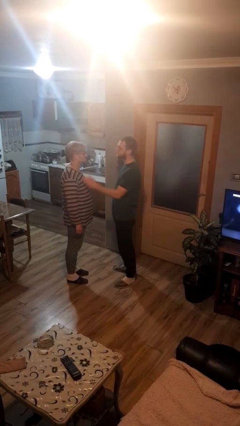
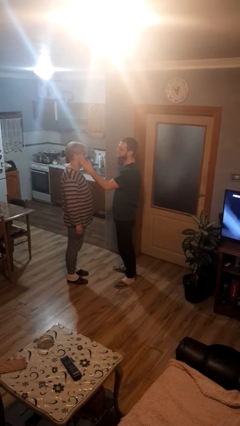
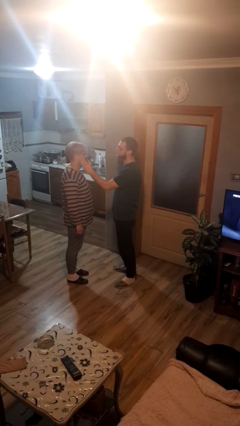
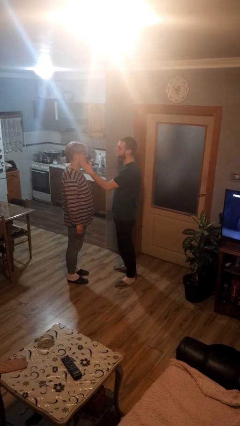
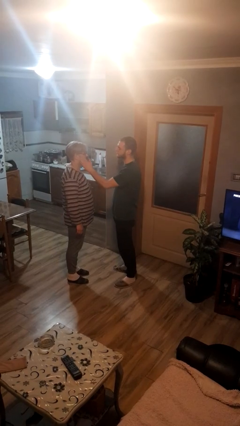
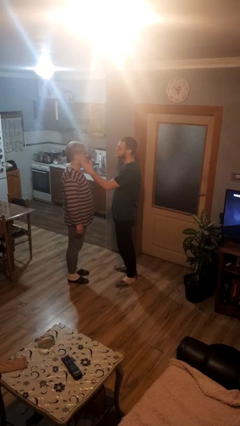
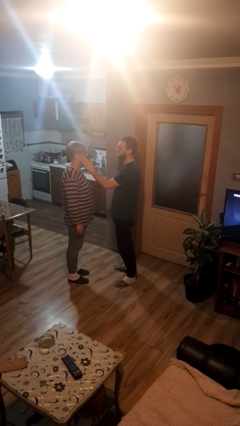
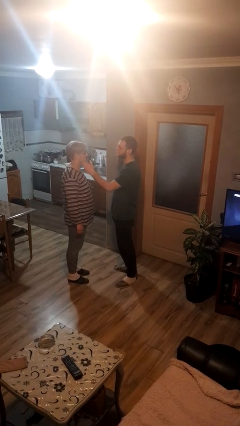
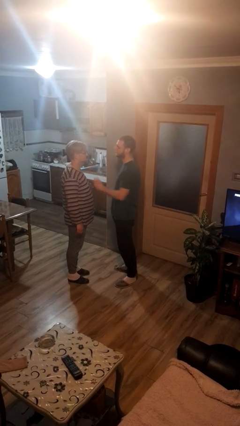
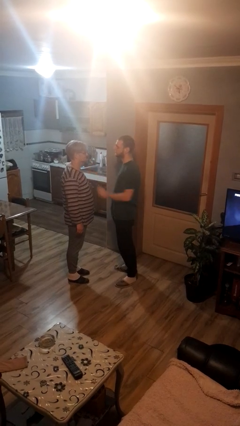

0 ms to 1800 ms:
person touches face of person

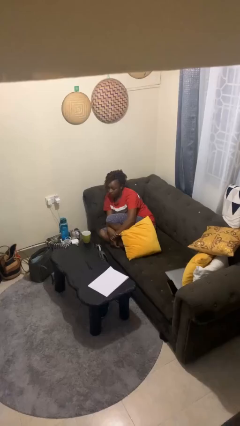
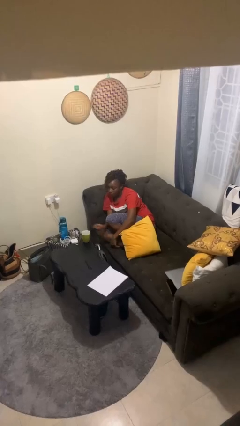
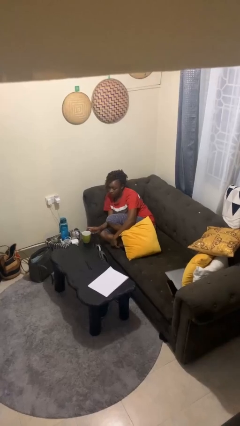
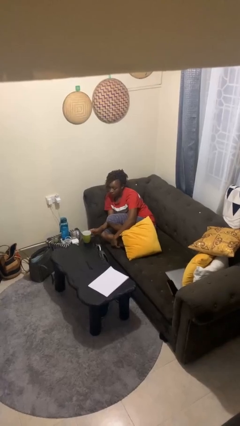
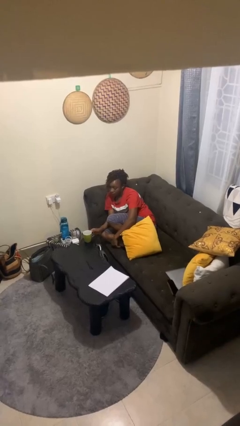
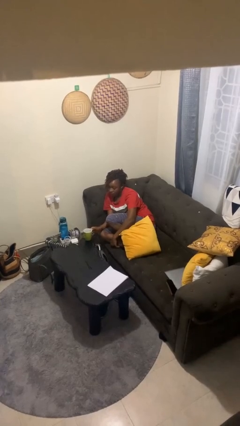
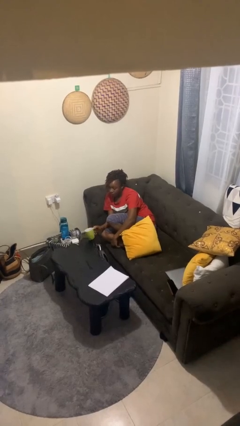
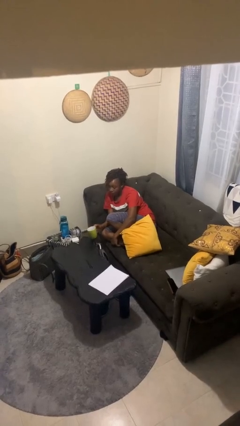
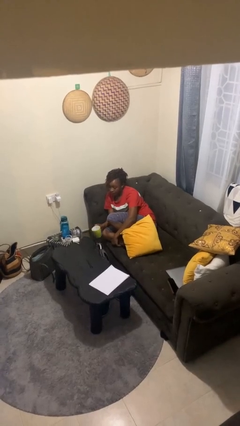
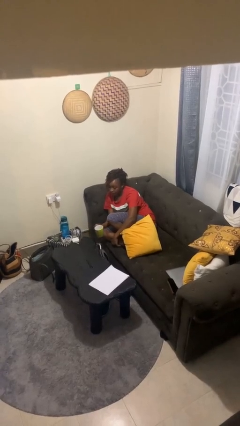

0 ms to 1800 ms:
person picks up object from table

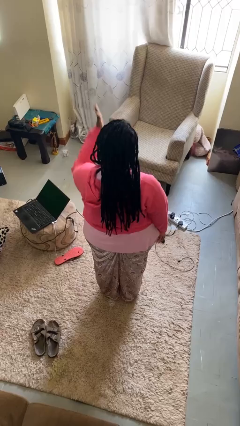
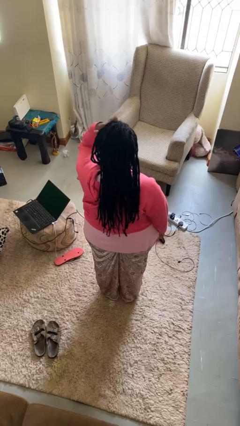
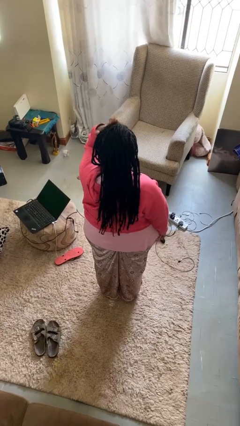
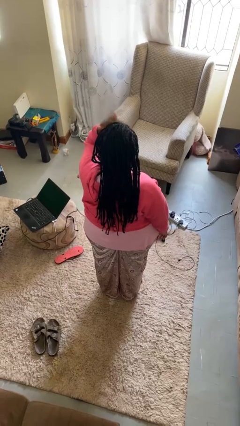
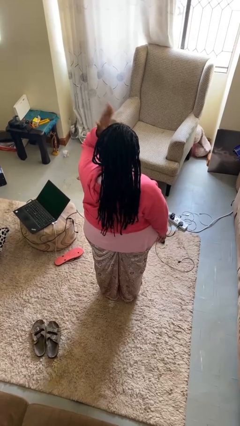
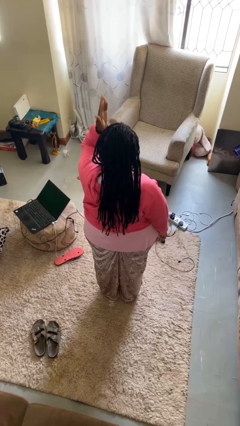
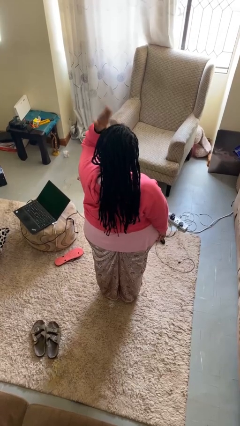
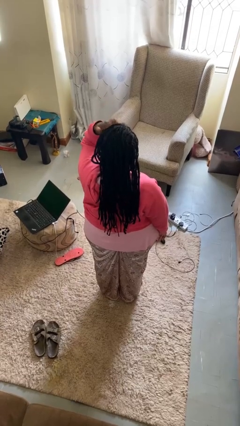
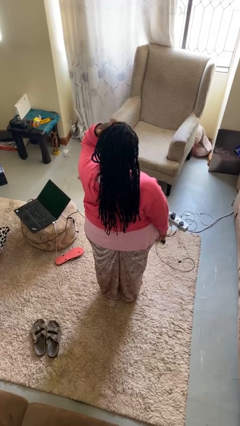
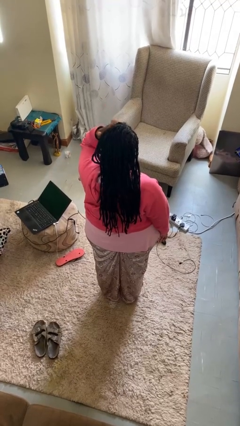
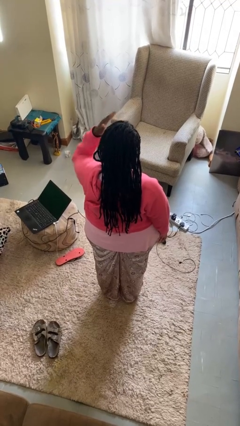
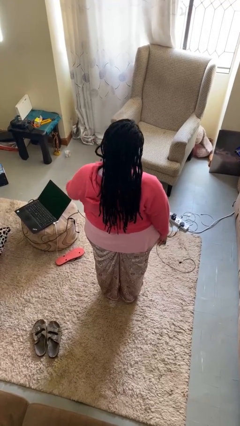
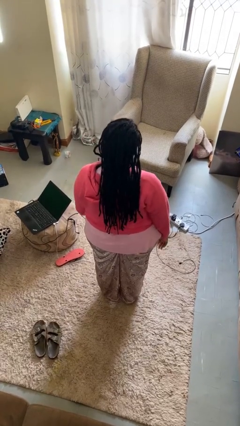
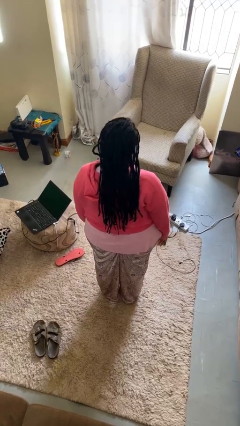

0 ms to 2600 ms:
person pats head

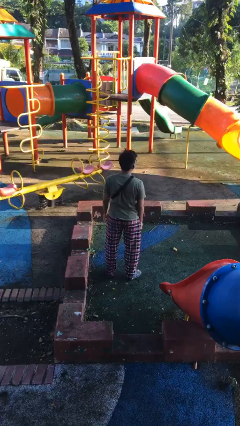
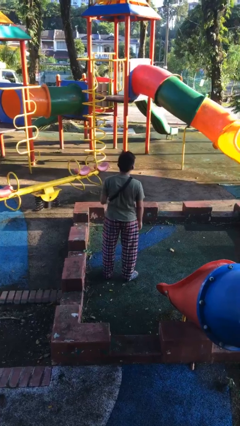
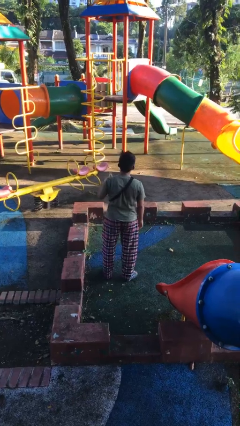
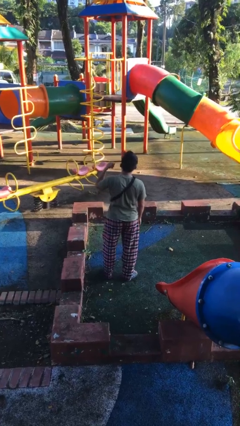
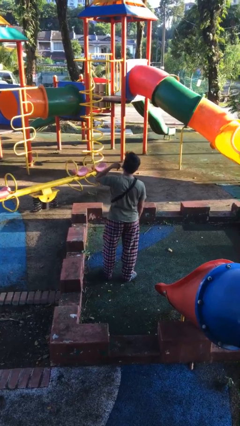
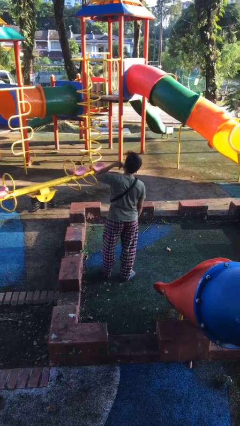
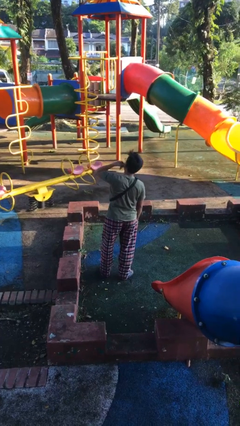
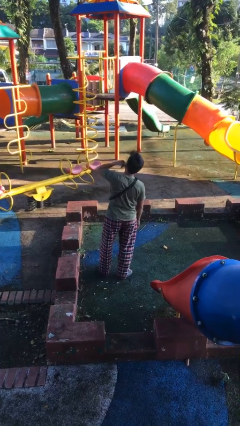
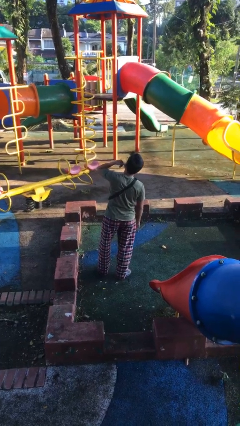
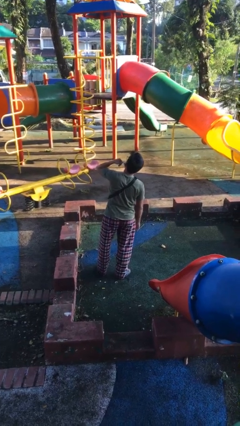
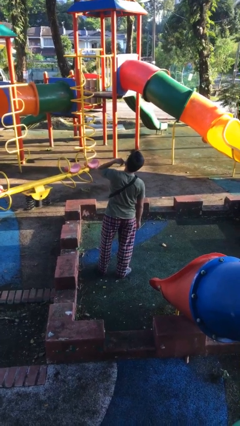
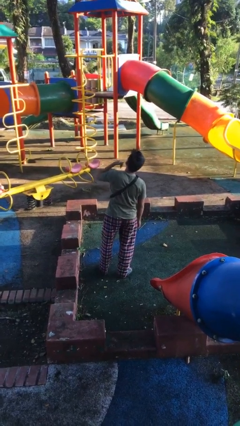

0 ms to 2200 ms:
person gestures call me

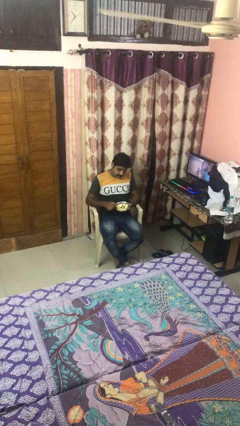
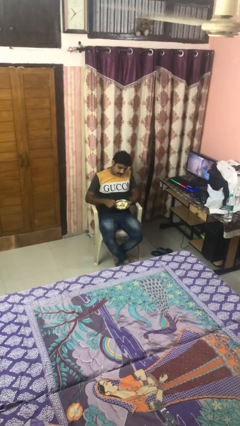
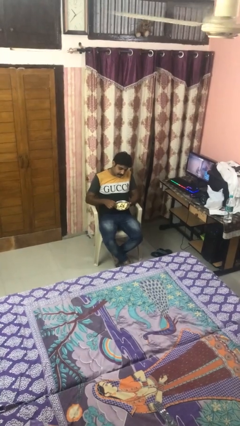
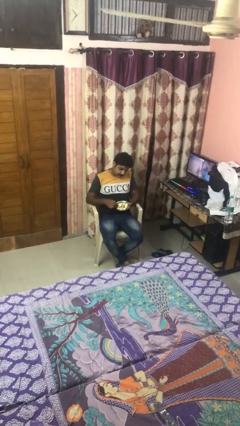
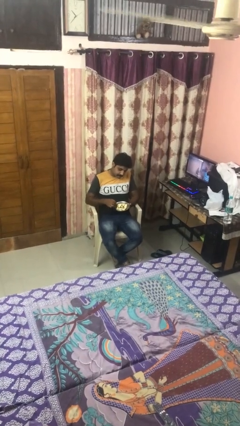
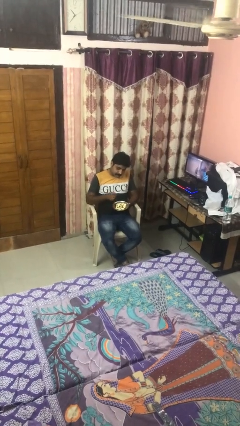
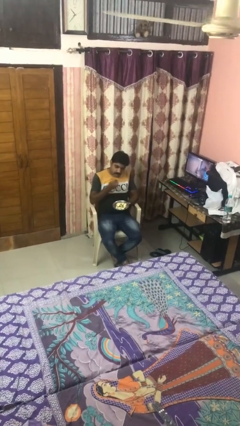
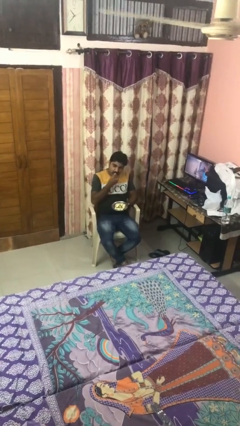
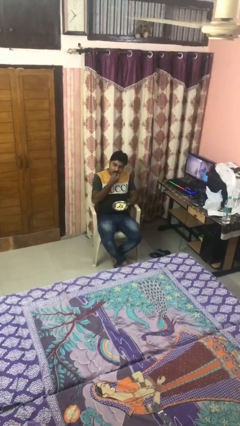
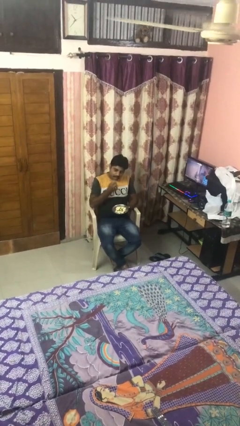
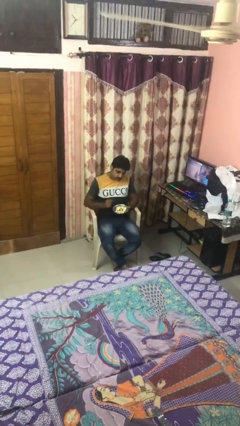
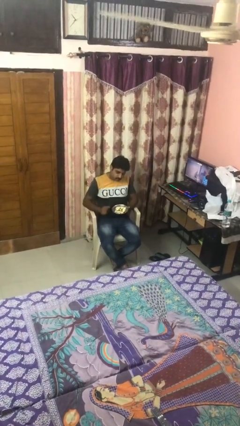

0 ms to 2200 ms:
person eats with hands

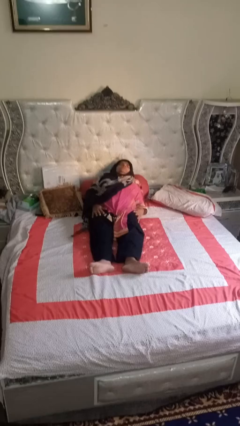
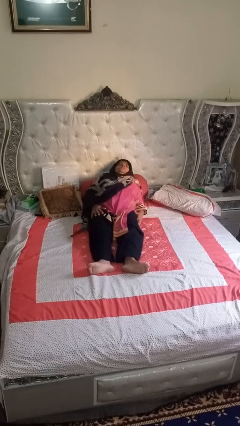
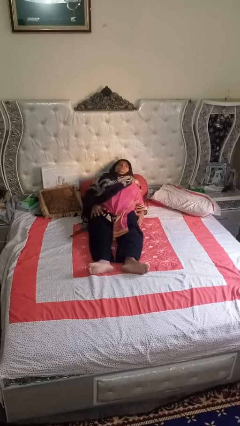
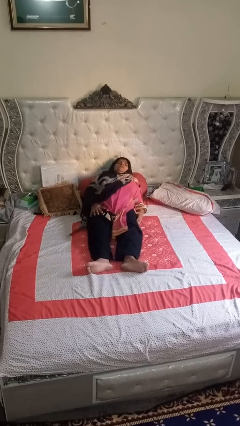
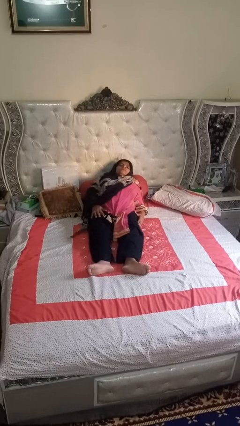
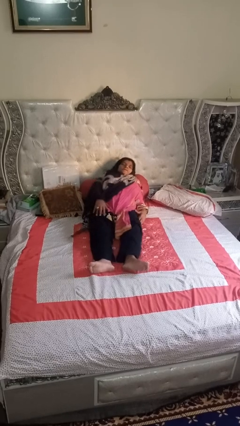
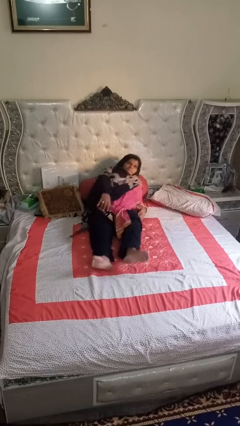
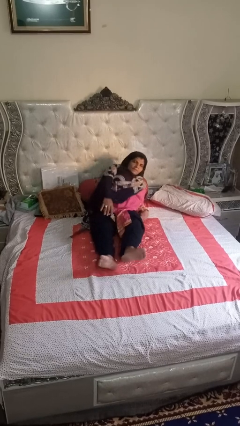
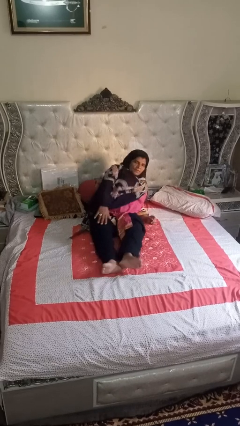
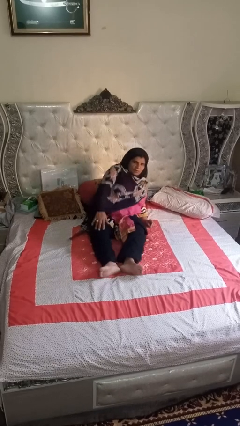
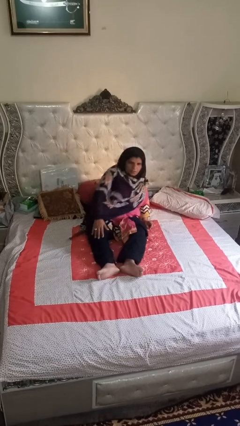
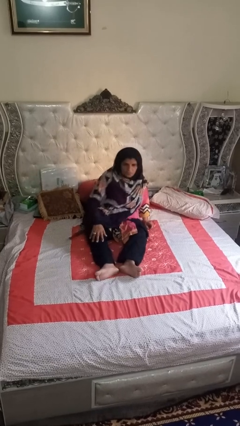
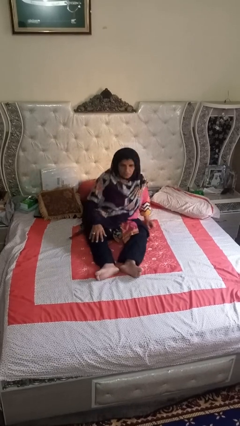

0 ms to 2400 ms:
person stands up

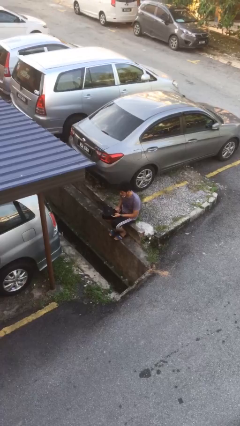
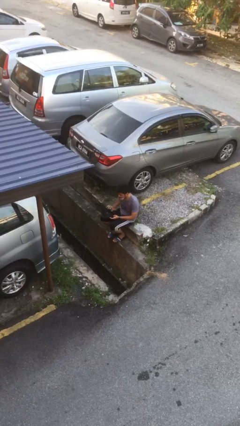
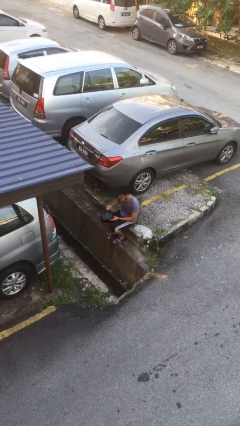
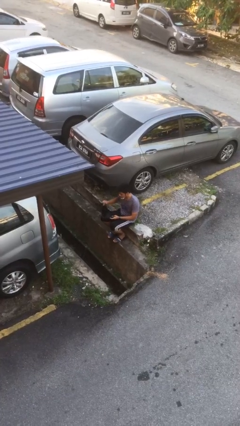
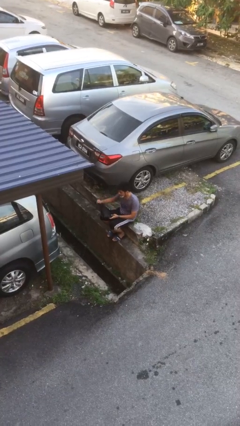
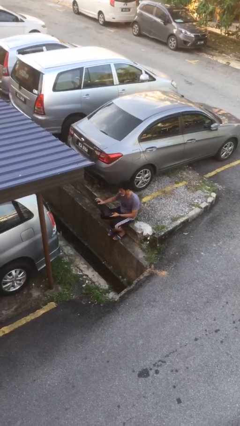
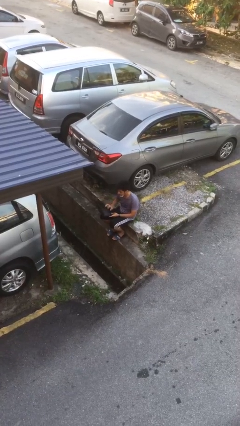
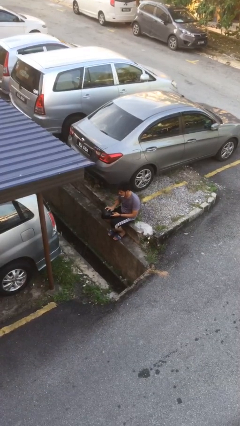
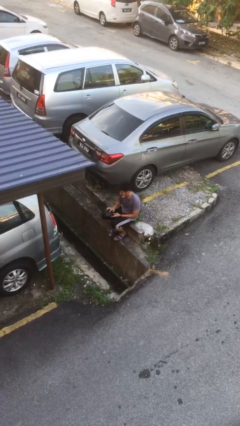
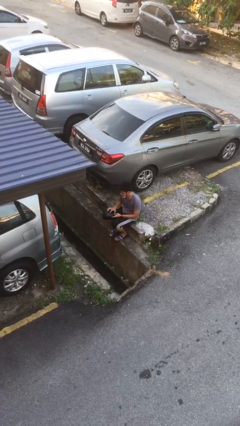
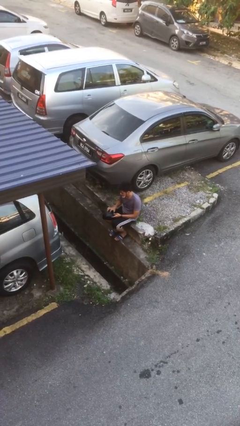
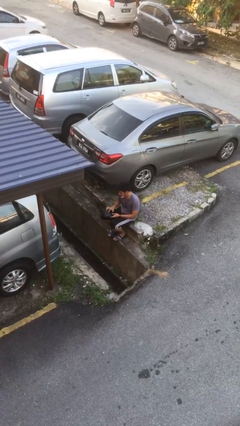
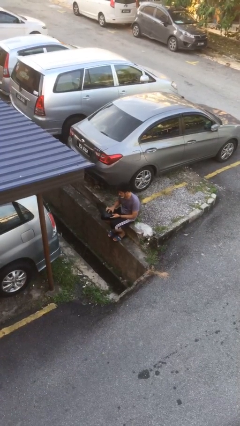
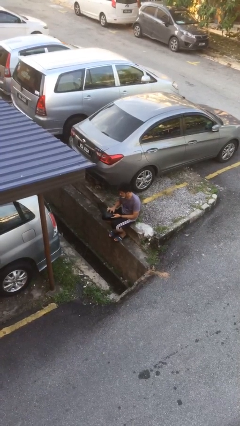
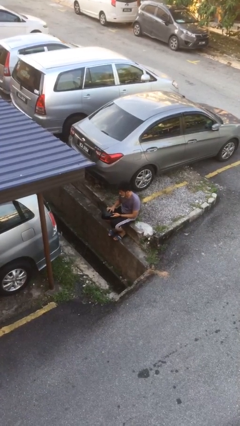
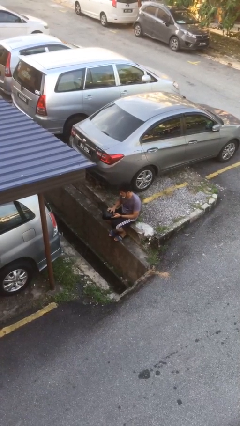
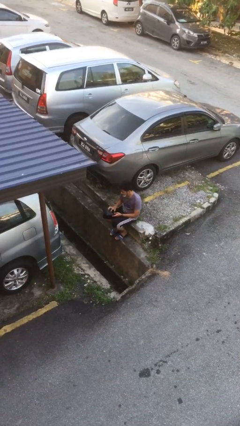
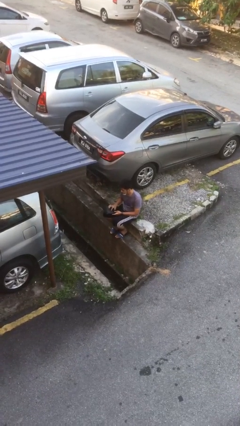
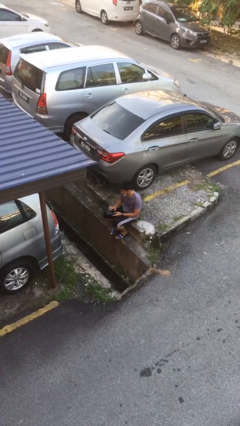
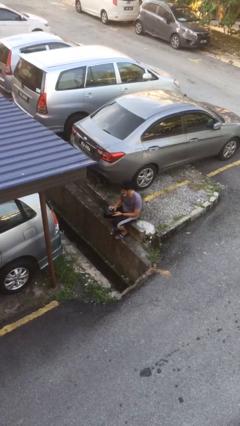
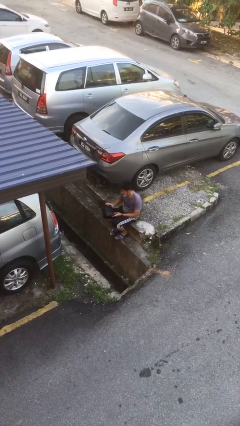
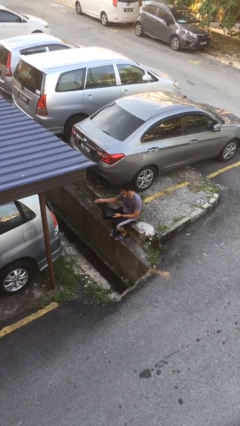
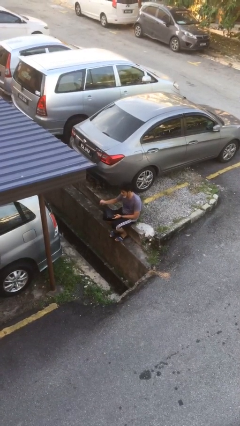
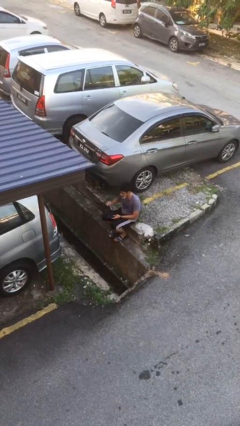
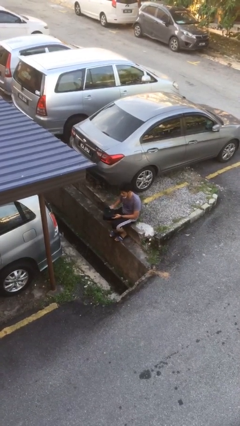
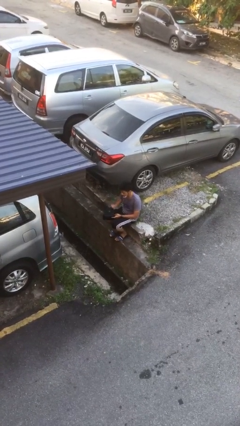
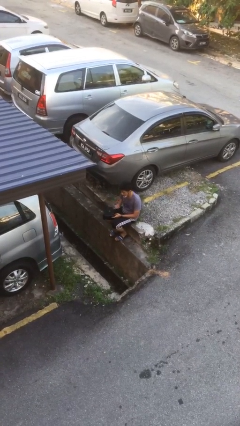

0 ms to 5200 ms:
person interacts with laptop
